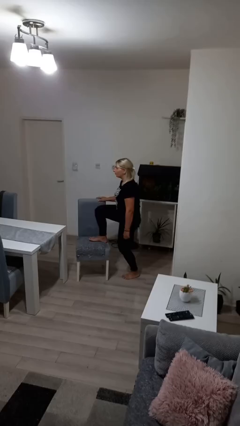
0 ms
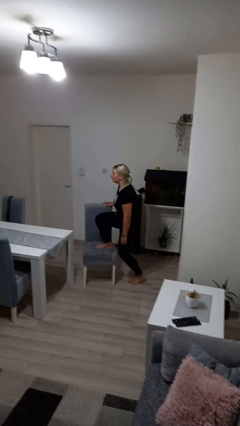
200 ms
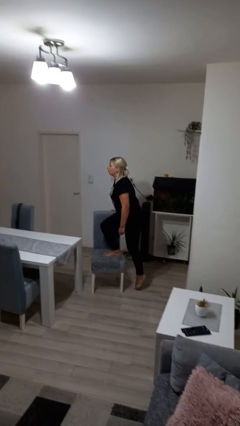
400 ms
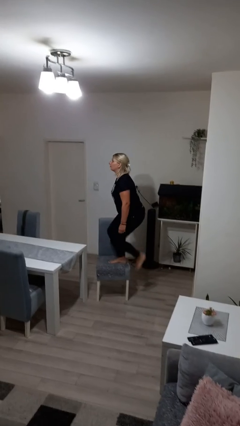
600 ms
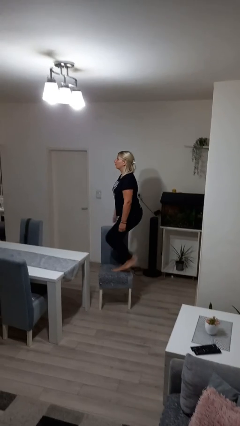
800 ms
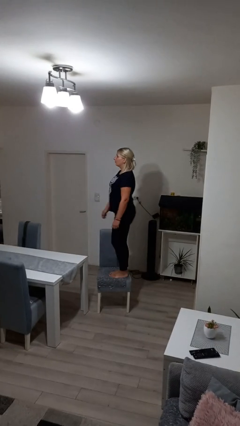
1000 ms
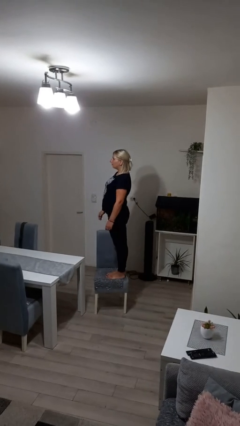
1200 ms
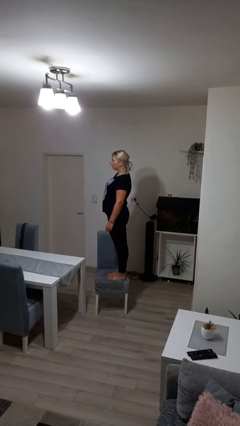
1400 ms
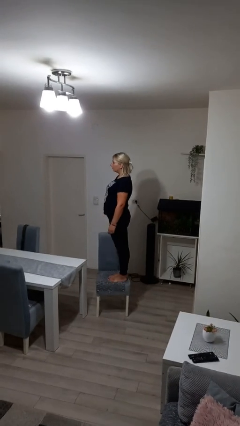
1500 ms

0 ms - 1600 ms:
person climbs on chair

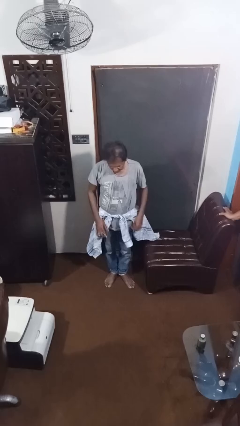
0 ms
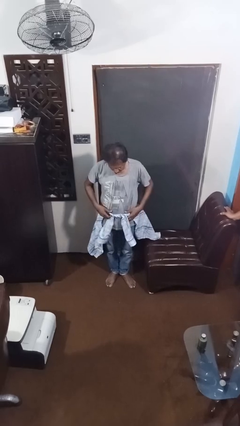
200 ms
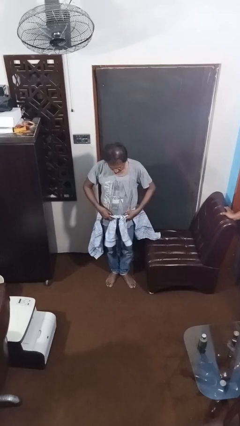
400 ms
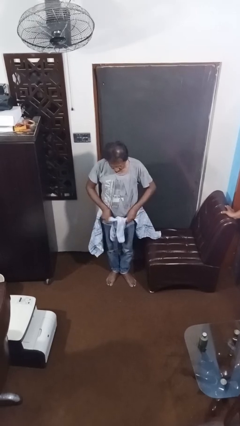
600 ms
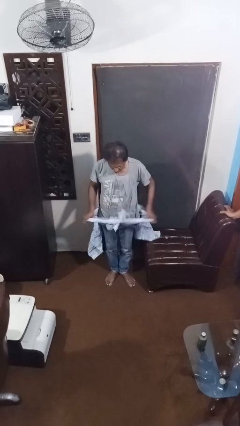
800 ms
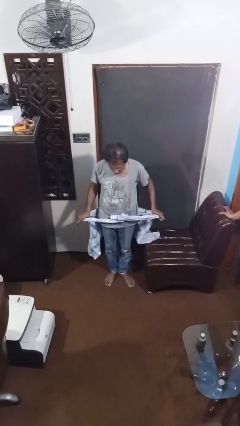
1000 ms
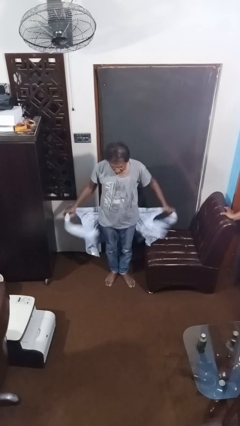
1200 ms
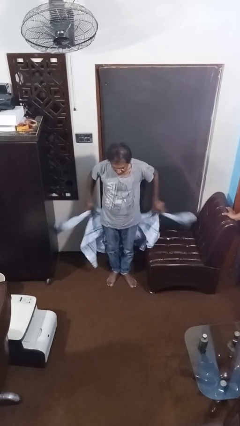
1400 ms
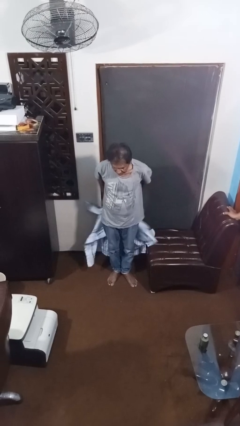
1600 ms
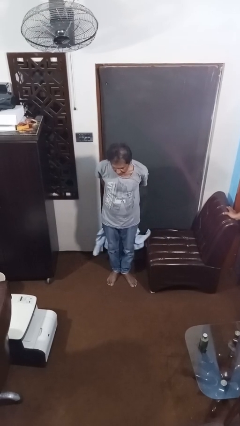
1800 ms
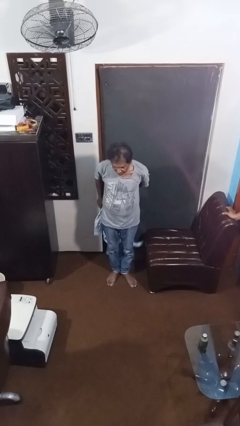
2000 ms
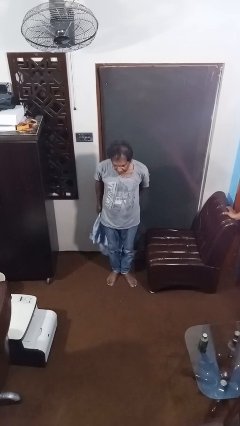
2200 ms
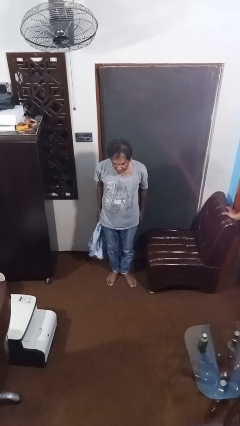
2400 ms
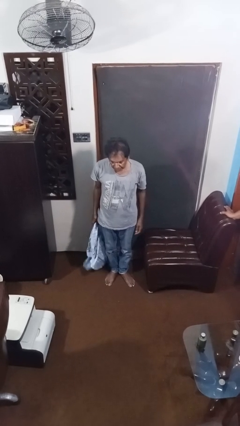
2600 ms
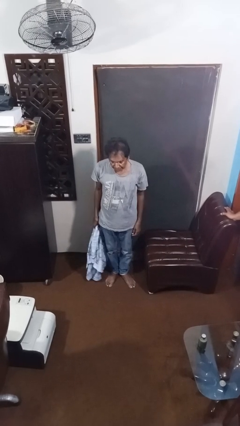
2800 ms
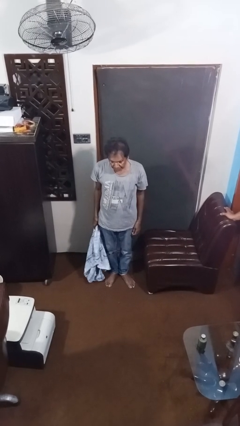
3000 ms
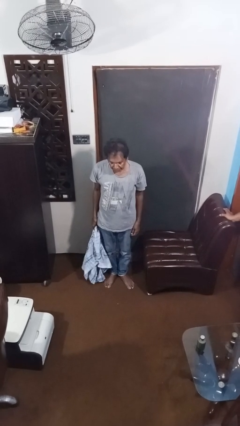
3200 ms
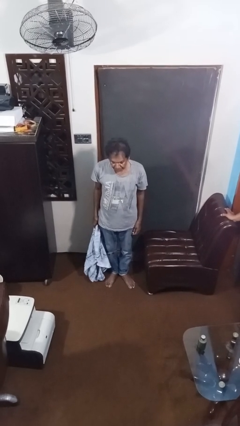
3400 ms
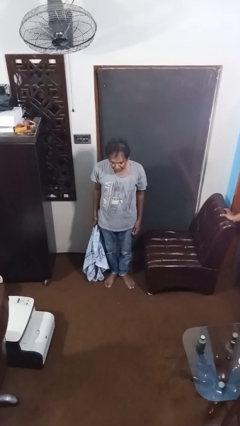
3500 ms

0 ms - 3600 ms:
person unties jacket around waist

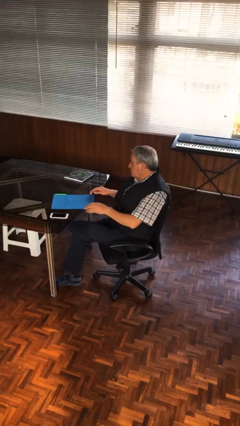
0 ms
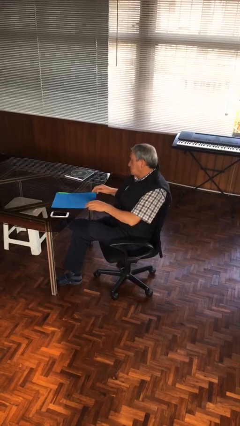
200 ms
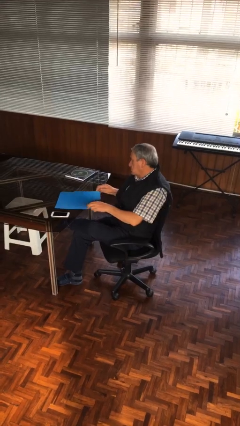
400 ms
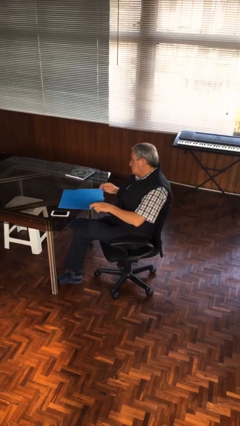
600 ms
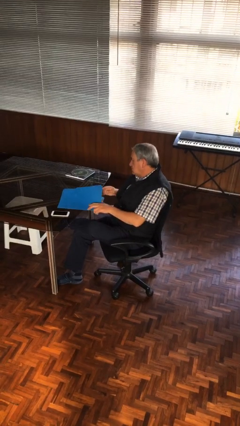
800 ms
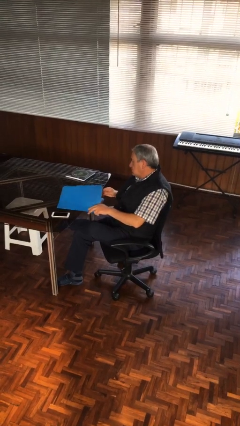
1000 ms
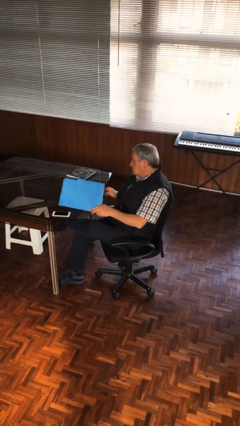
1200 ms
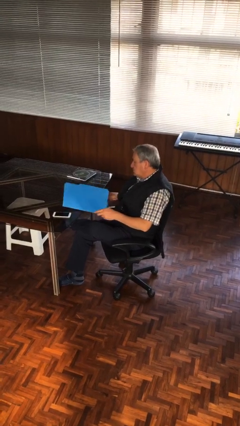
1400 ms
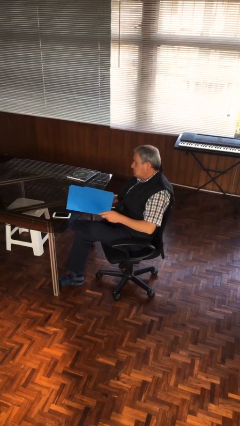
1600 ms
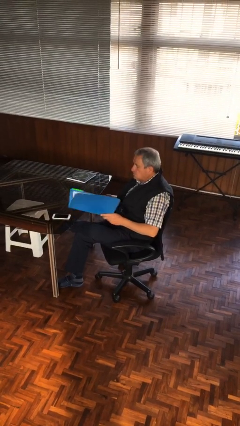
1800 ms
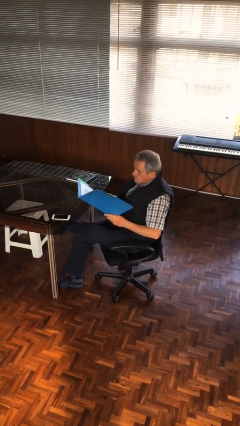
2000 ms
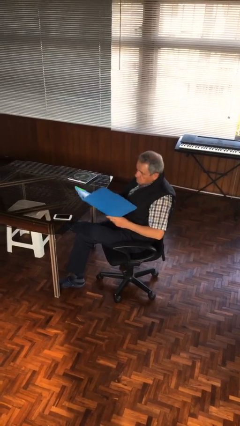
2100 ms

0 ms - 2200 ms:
person picks up object from table

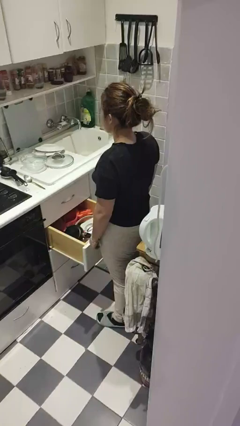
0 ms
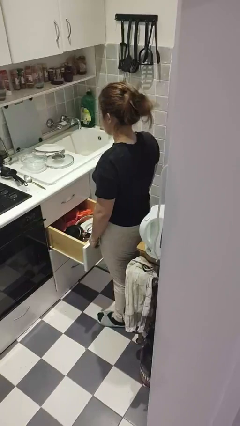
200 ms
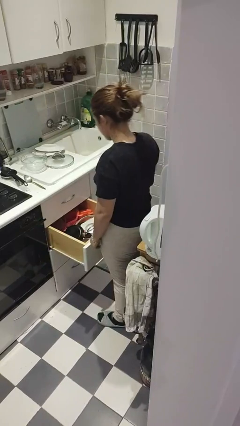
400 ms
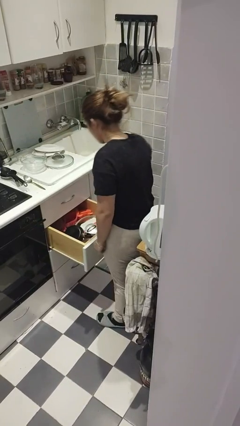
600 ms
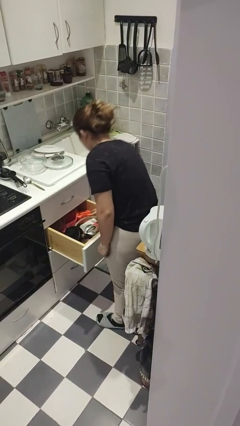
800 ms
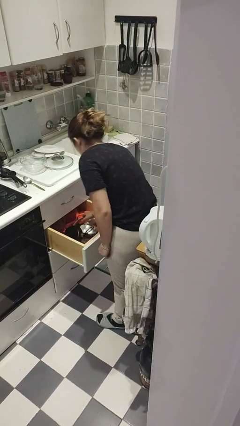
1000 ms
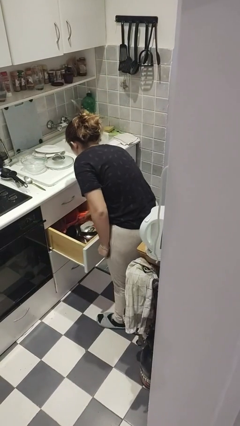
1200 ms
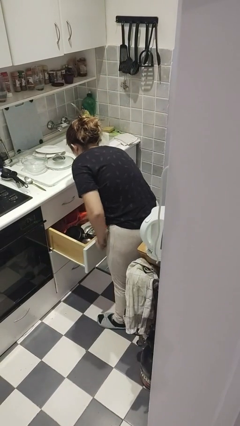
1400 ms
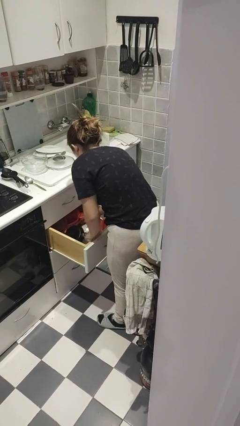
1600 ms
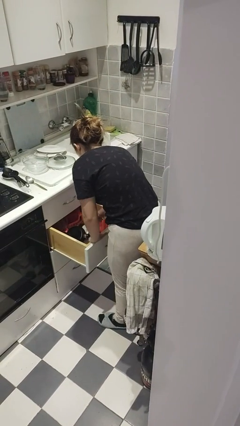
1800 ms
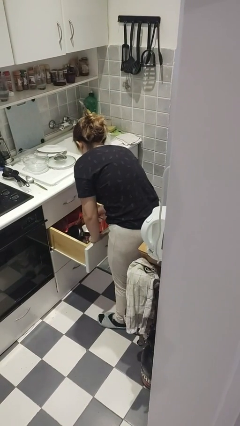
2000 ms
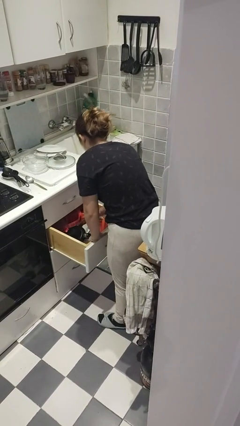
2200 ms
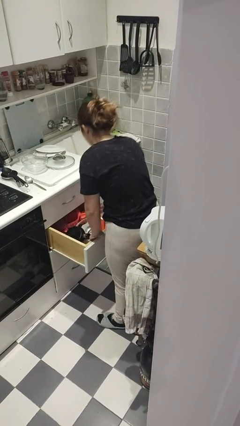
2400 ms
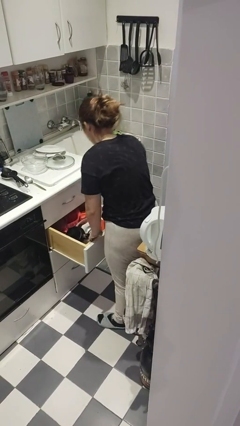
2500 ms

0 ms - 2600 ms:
person searches in kitchen drawer

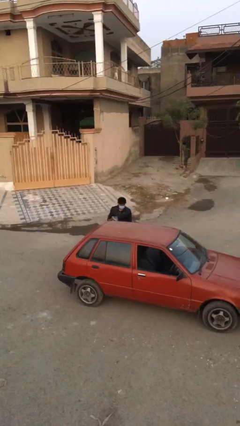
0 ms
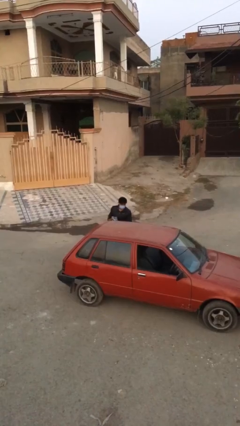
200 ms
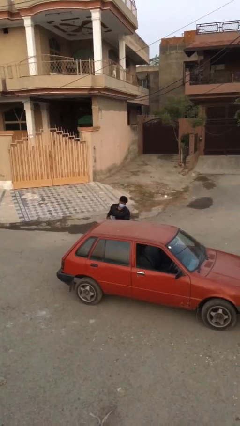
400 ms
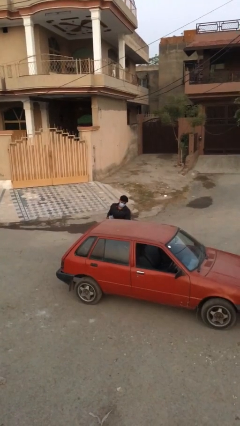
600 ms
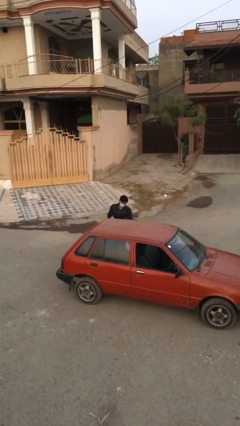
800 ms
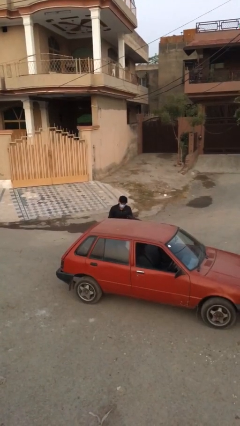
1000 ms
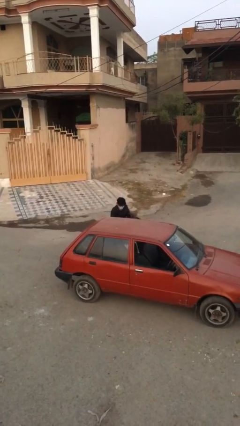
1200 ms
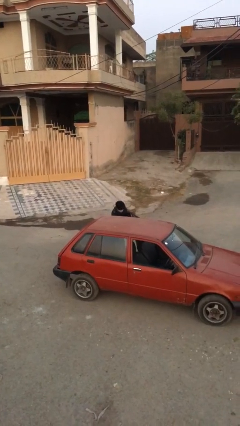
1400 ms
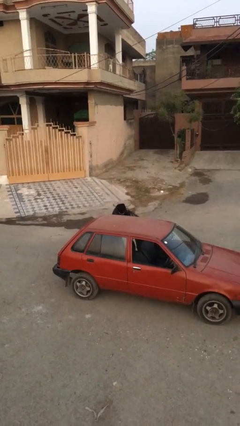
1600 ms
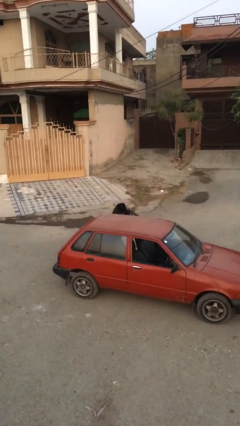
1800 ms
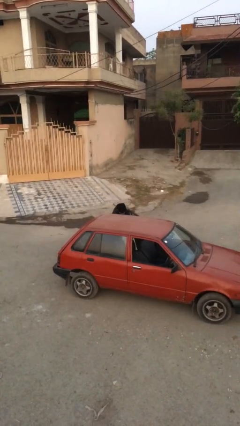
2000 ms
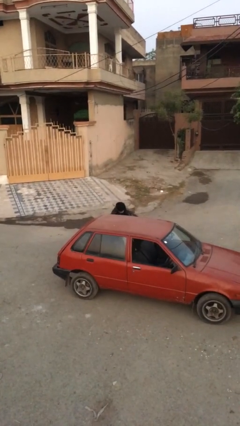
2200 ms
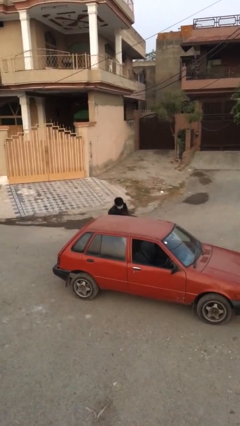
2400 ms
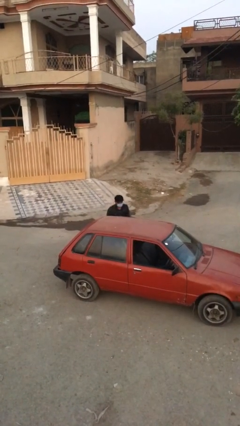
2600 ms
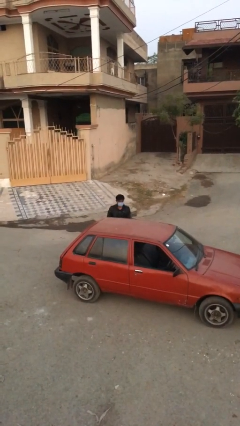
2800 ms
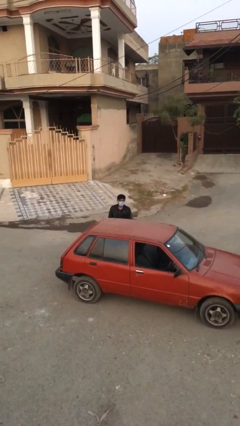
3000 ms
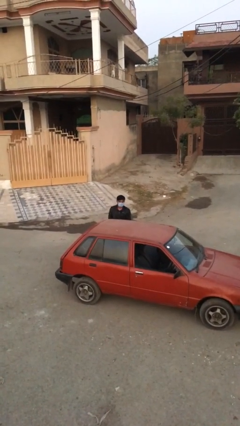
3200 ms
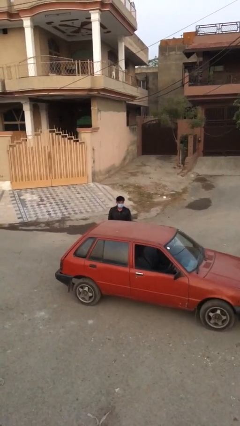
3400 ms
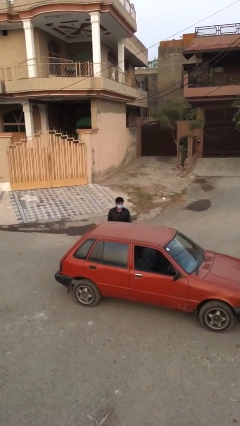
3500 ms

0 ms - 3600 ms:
person loads car

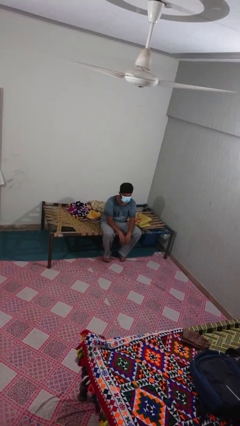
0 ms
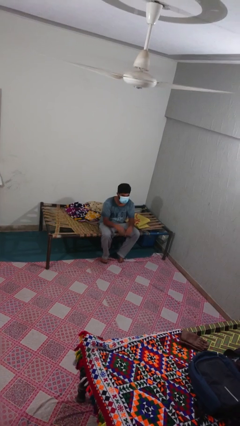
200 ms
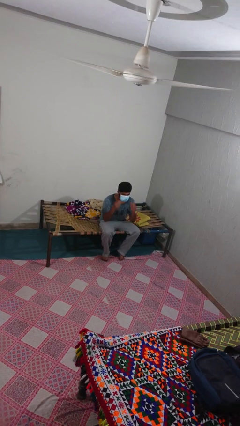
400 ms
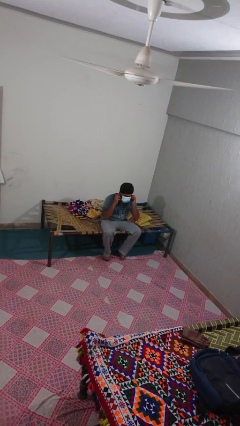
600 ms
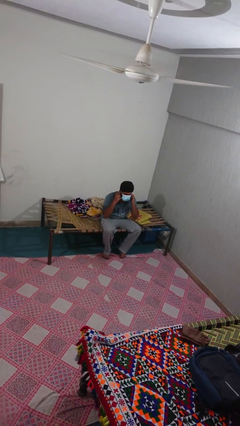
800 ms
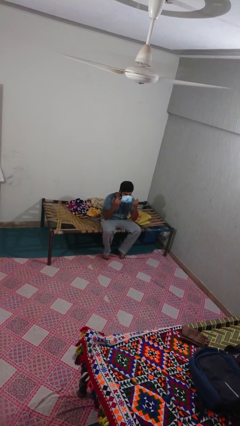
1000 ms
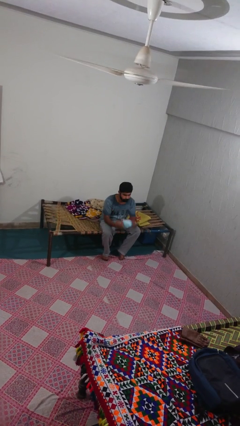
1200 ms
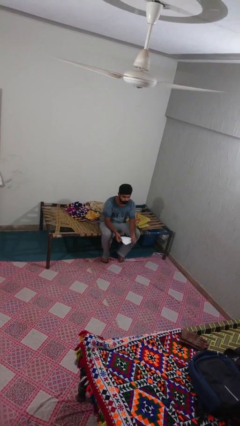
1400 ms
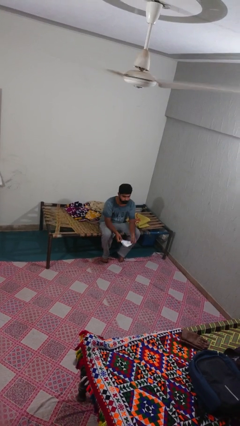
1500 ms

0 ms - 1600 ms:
person takes off facemask

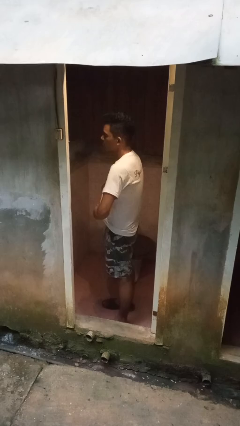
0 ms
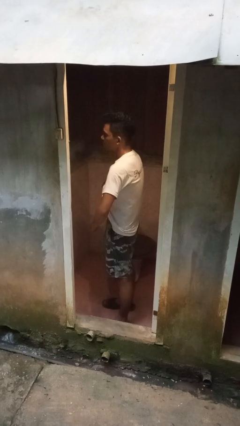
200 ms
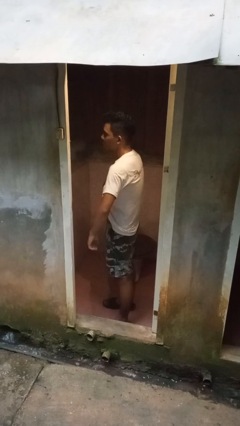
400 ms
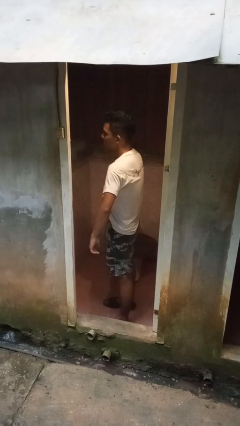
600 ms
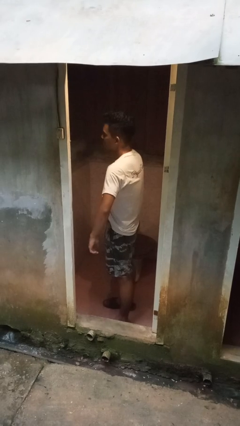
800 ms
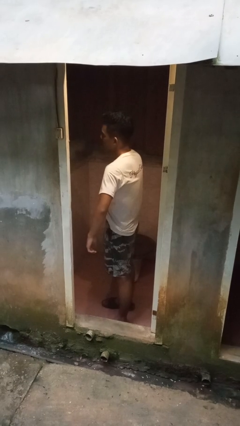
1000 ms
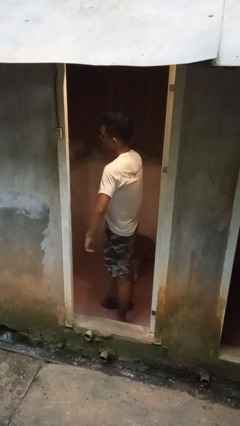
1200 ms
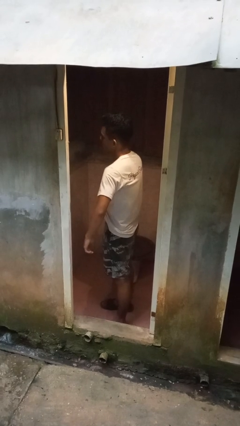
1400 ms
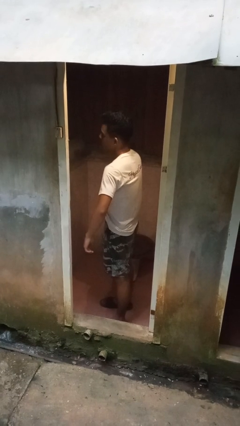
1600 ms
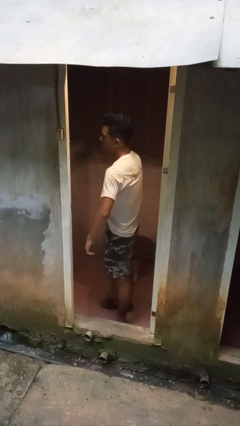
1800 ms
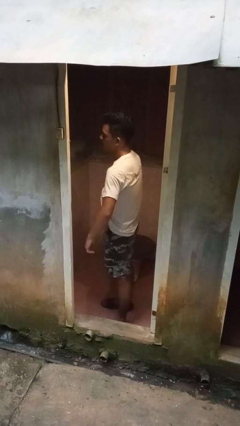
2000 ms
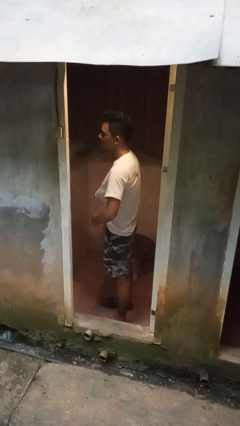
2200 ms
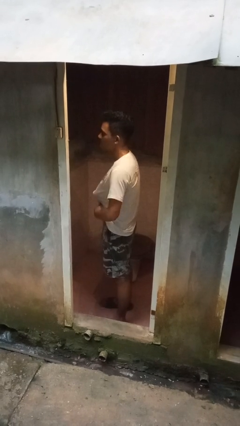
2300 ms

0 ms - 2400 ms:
person applies deodorant
